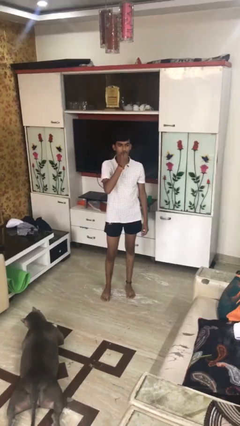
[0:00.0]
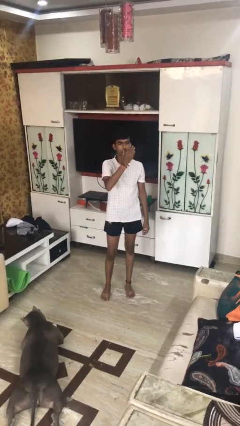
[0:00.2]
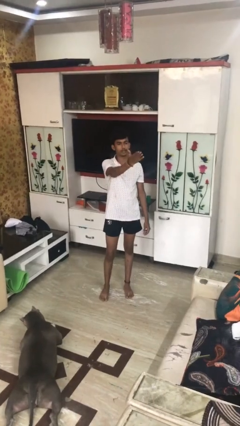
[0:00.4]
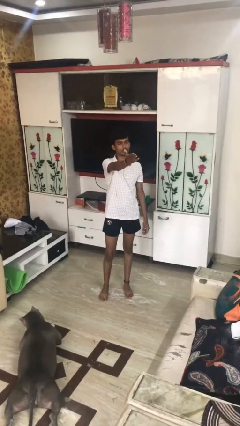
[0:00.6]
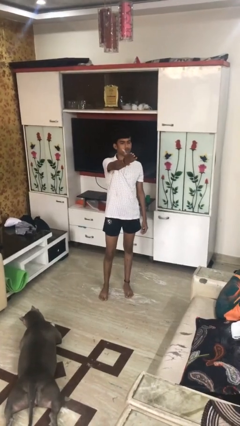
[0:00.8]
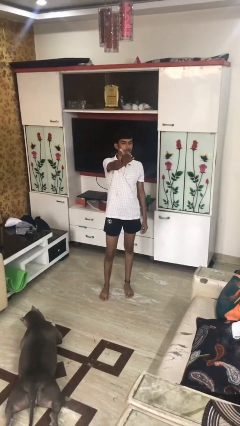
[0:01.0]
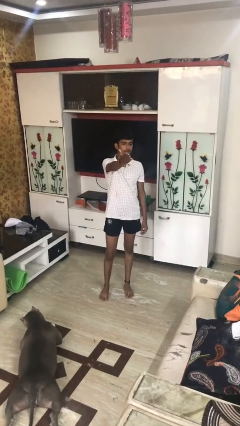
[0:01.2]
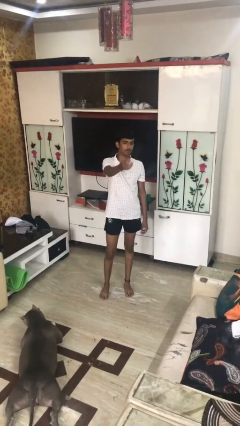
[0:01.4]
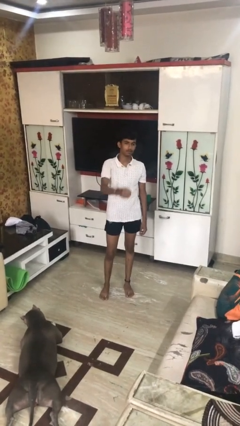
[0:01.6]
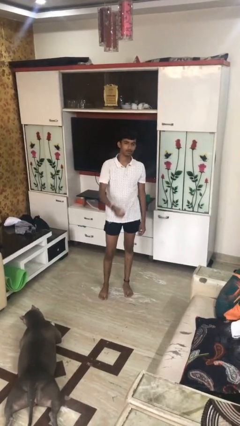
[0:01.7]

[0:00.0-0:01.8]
person gestures blow kiss

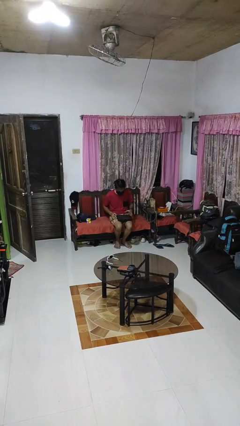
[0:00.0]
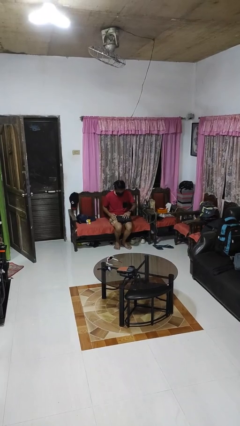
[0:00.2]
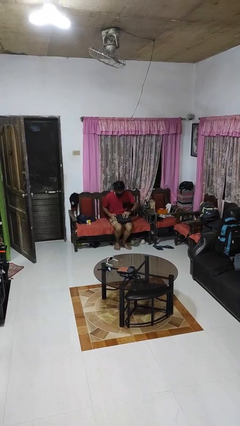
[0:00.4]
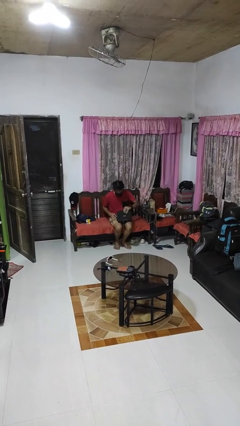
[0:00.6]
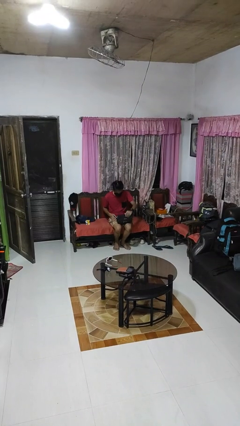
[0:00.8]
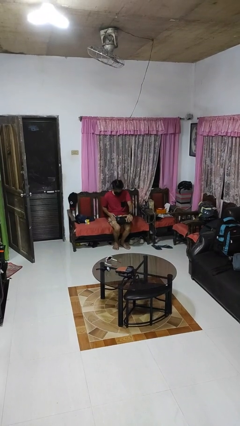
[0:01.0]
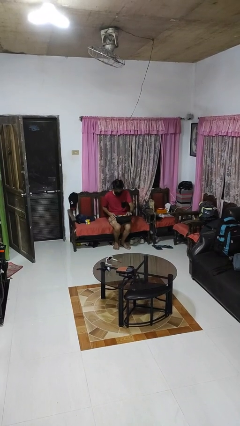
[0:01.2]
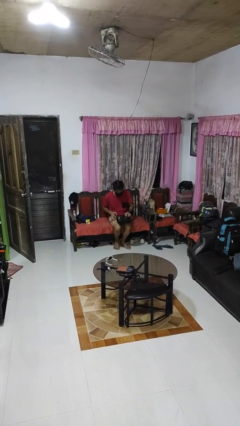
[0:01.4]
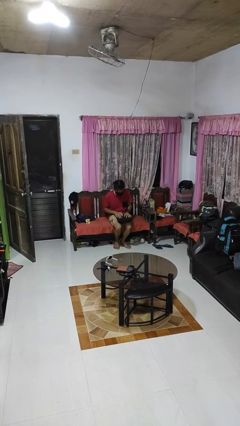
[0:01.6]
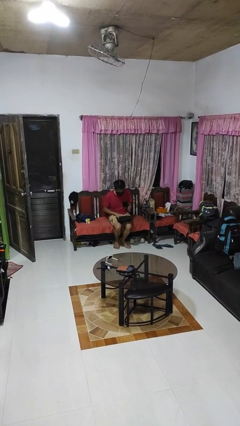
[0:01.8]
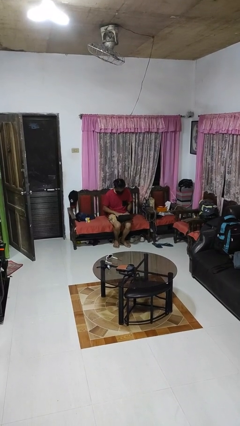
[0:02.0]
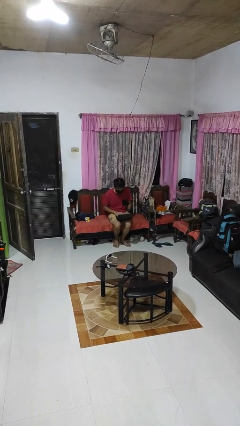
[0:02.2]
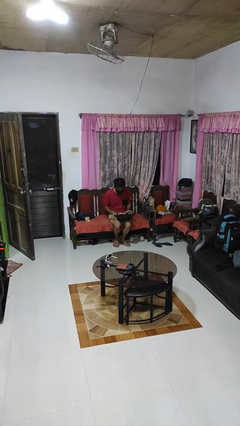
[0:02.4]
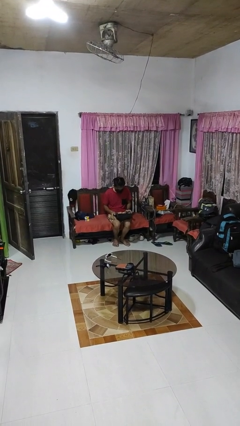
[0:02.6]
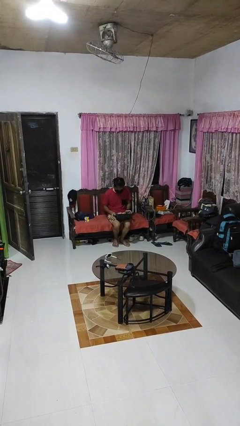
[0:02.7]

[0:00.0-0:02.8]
person opens laptop

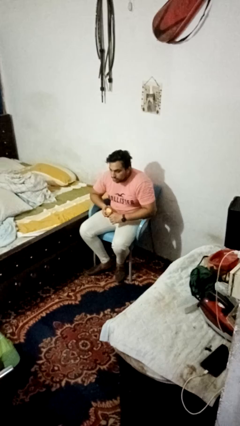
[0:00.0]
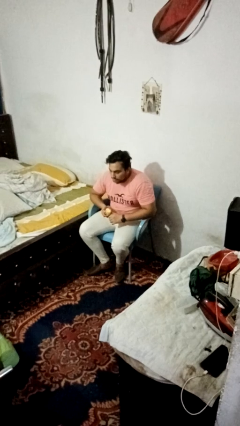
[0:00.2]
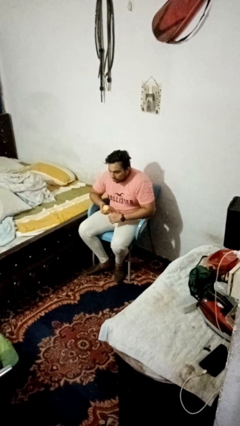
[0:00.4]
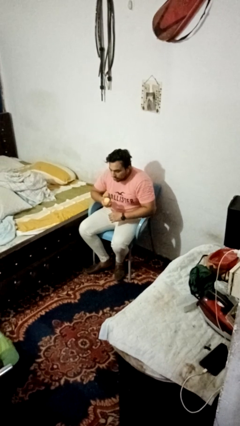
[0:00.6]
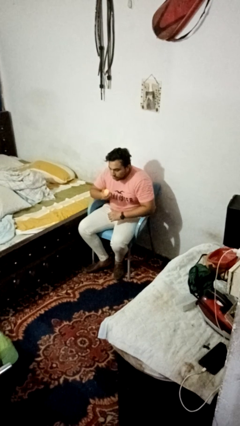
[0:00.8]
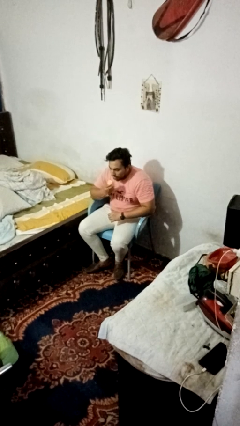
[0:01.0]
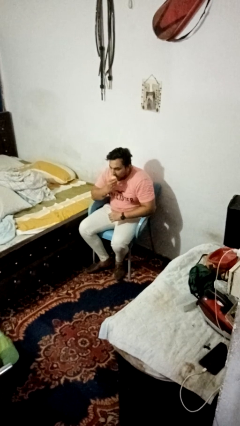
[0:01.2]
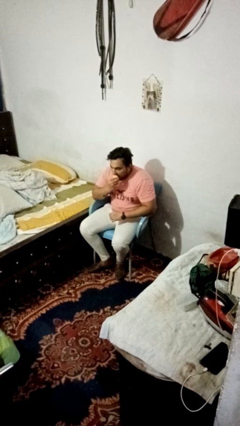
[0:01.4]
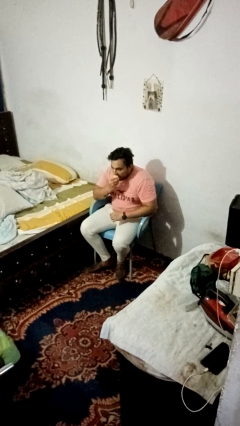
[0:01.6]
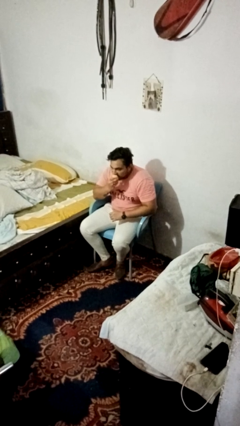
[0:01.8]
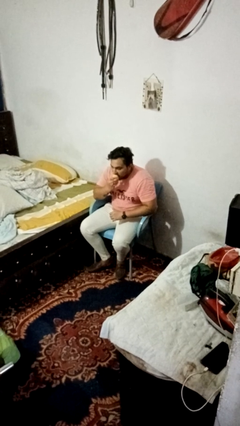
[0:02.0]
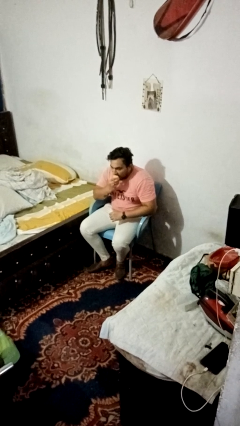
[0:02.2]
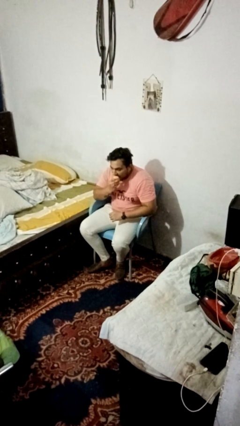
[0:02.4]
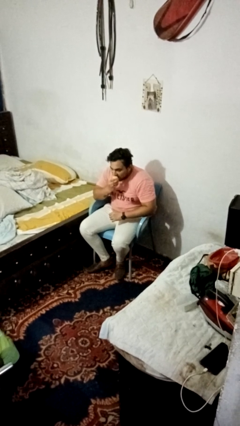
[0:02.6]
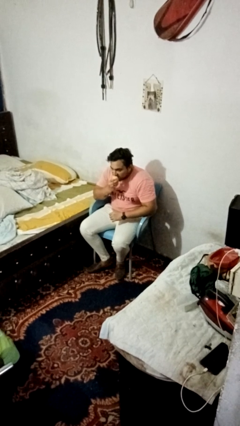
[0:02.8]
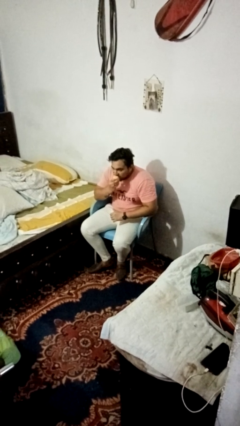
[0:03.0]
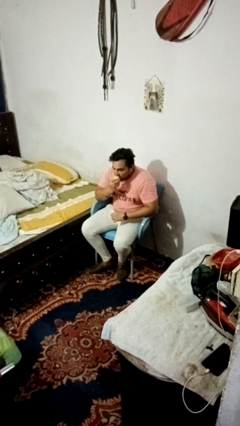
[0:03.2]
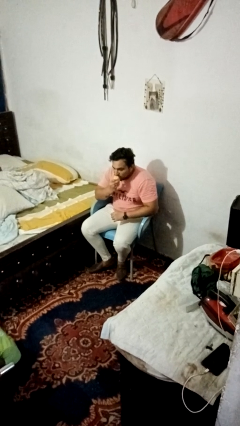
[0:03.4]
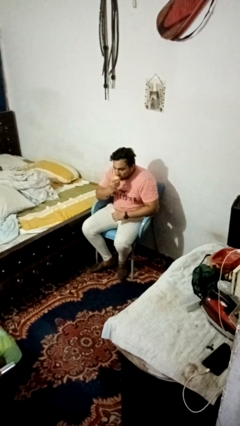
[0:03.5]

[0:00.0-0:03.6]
person eats apple

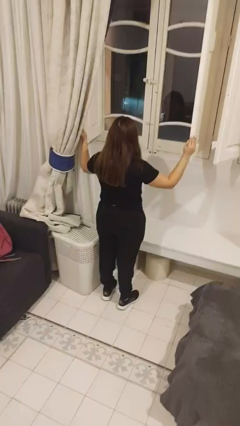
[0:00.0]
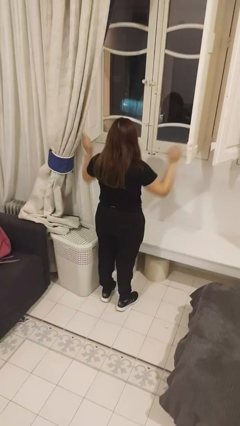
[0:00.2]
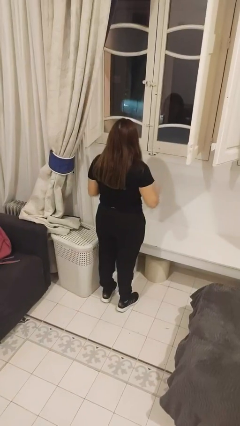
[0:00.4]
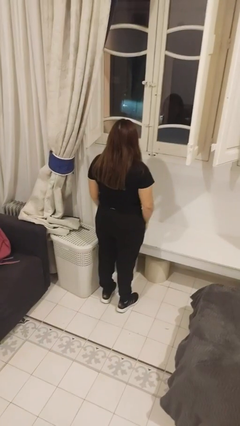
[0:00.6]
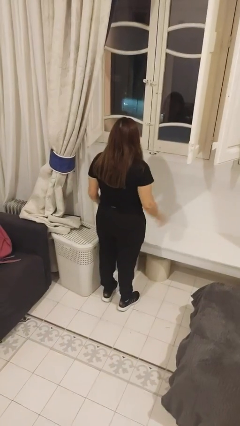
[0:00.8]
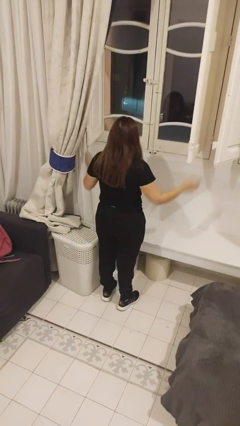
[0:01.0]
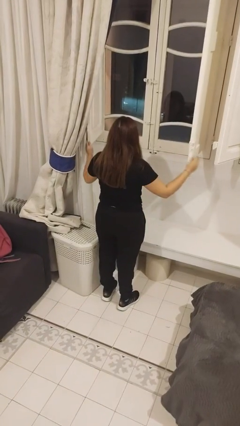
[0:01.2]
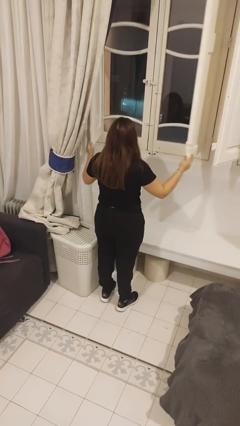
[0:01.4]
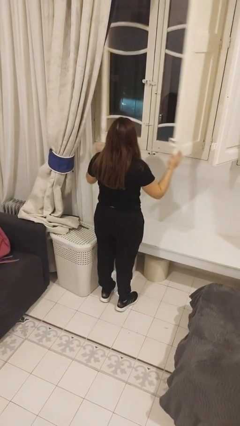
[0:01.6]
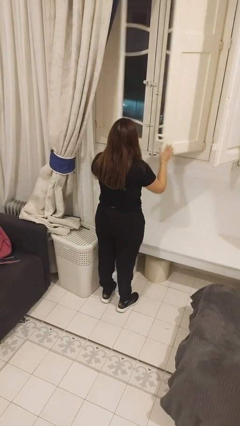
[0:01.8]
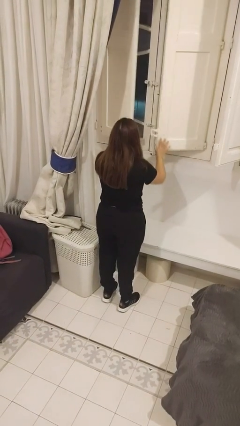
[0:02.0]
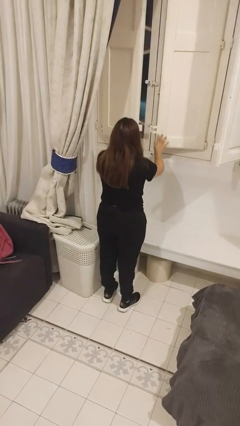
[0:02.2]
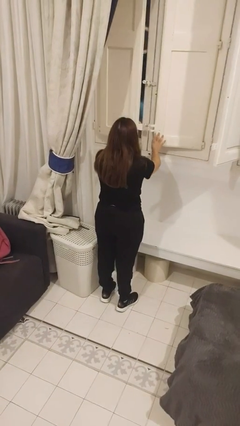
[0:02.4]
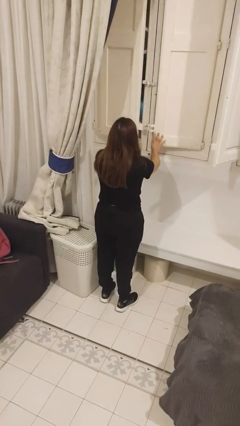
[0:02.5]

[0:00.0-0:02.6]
person closes home window

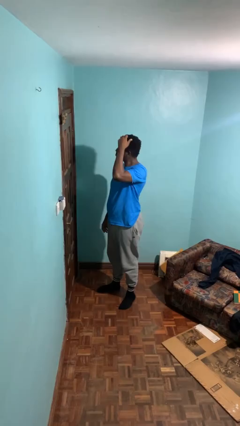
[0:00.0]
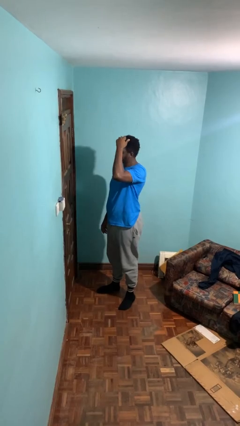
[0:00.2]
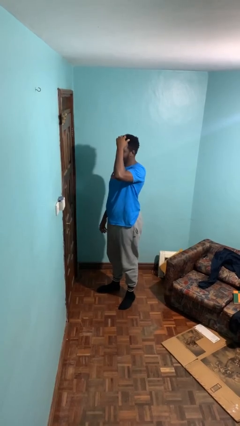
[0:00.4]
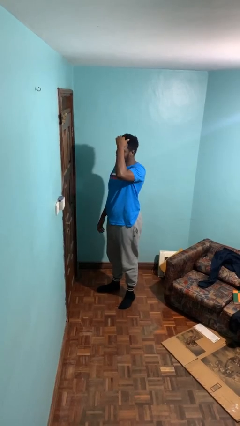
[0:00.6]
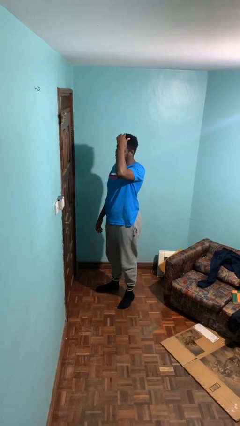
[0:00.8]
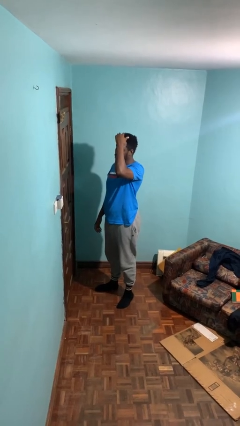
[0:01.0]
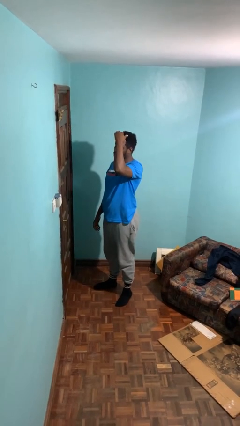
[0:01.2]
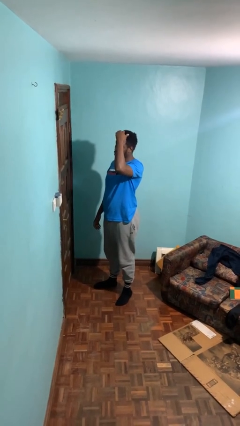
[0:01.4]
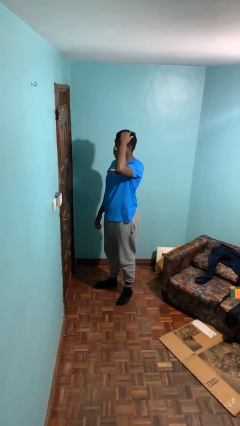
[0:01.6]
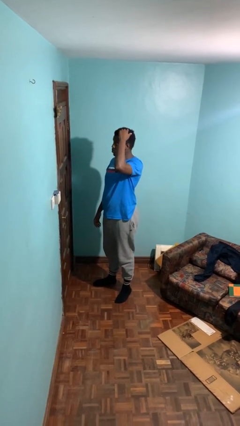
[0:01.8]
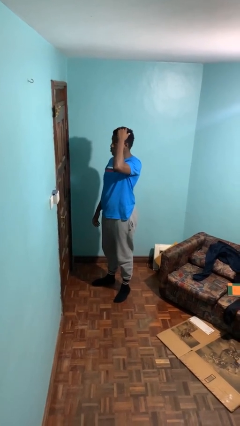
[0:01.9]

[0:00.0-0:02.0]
person scratches face

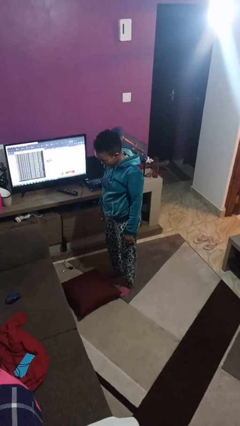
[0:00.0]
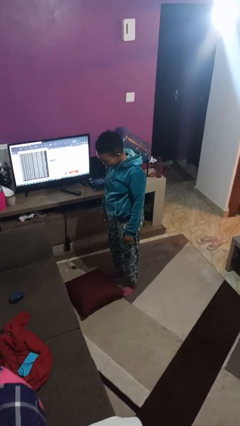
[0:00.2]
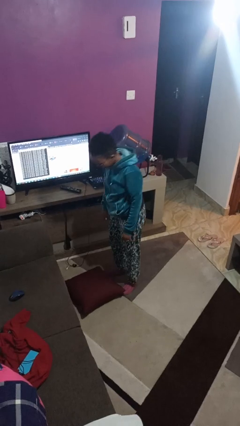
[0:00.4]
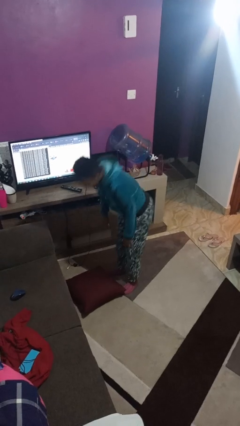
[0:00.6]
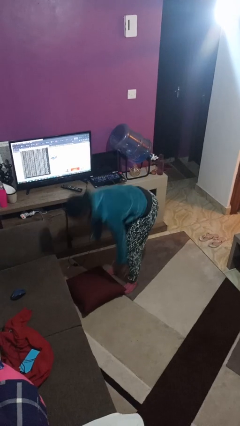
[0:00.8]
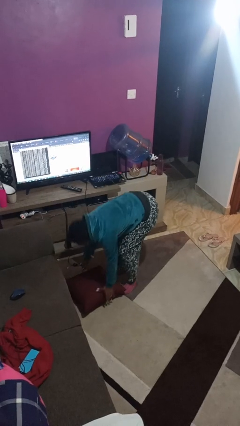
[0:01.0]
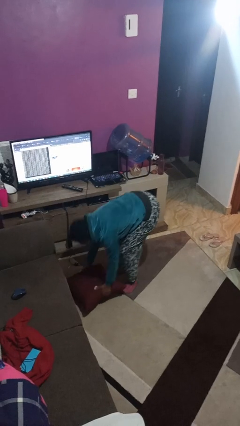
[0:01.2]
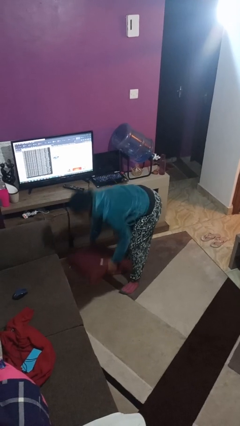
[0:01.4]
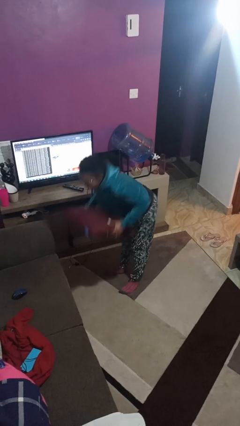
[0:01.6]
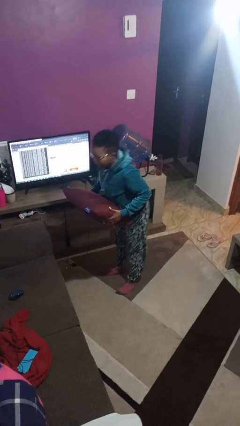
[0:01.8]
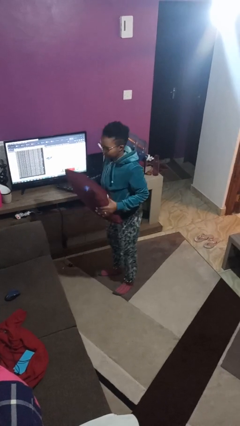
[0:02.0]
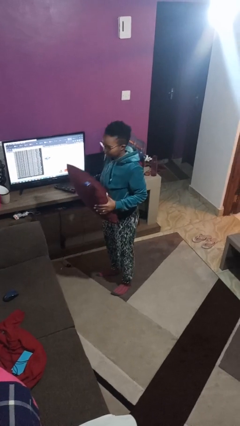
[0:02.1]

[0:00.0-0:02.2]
person picks up object from floor

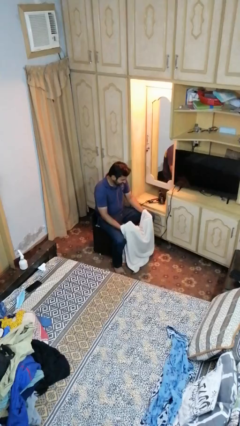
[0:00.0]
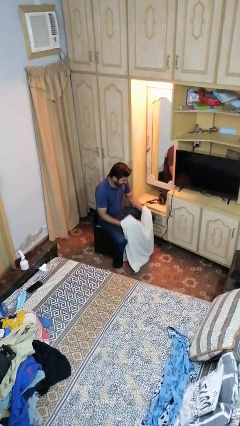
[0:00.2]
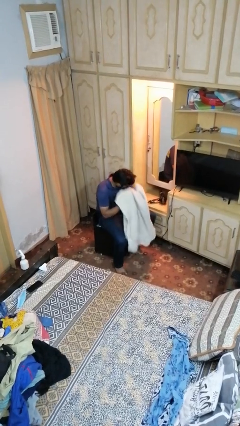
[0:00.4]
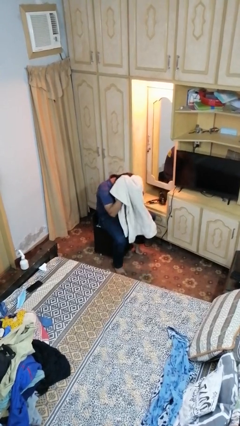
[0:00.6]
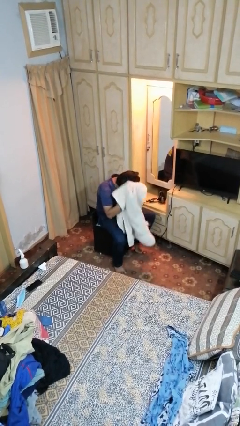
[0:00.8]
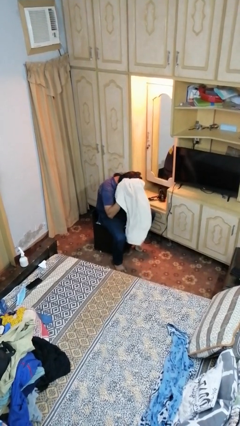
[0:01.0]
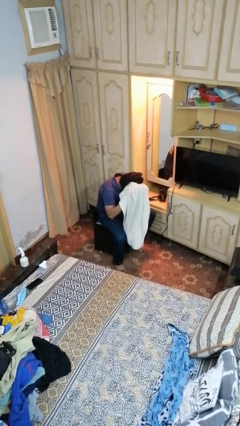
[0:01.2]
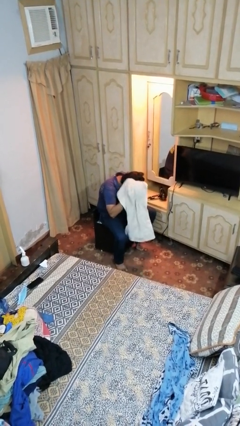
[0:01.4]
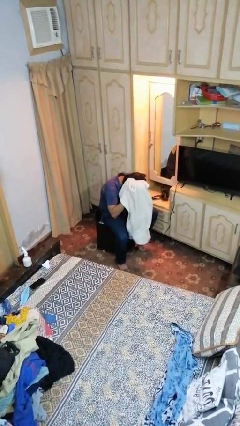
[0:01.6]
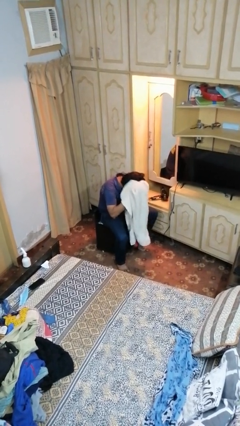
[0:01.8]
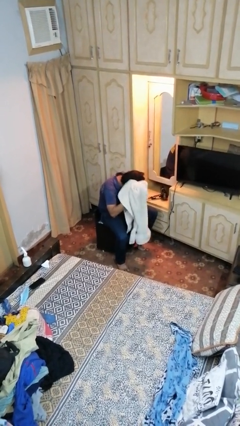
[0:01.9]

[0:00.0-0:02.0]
person dries hair with towel
